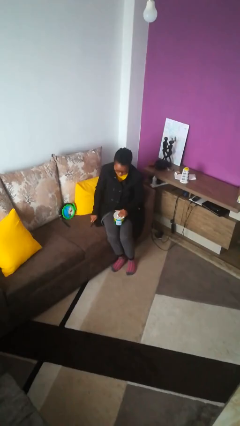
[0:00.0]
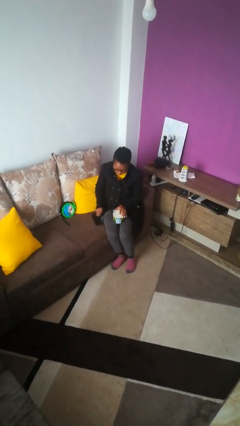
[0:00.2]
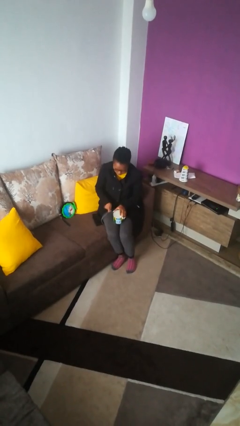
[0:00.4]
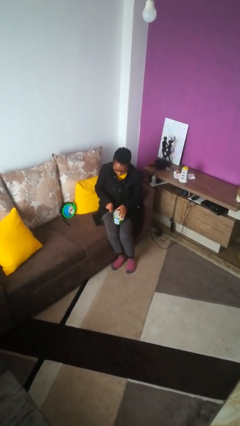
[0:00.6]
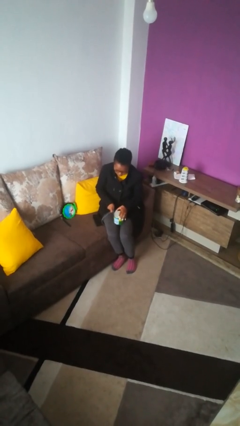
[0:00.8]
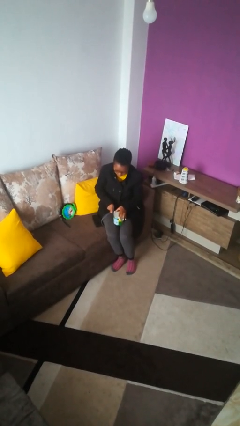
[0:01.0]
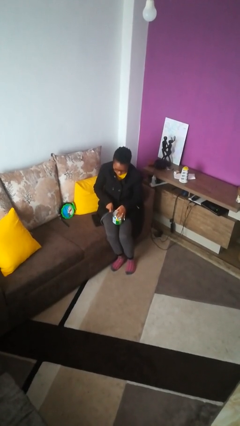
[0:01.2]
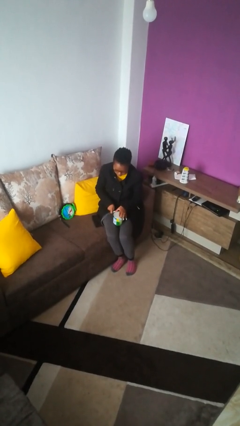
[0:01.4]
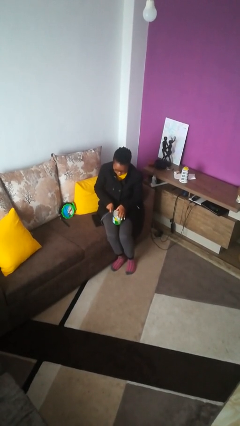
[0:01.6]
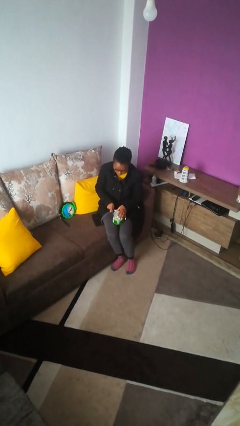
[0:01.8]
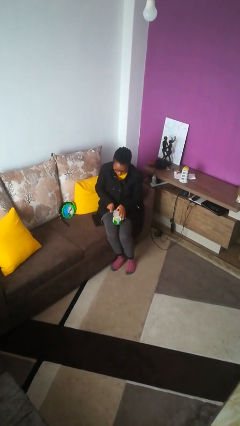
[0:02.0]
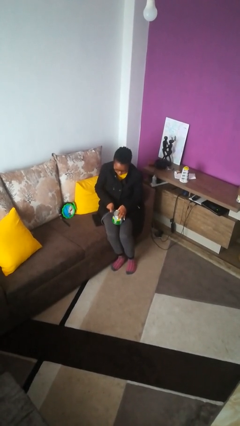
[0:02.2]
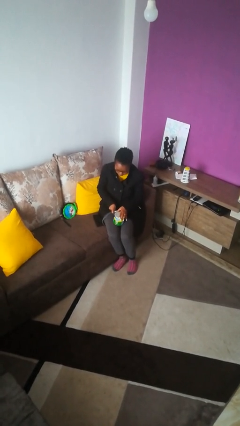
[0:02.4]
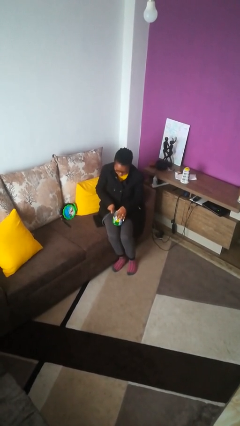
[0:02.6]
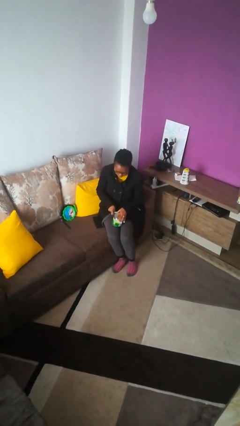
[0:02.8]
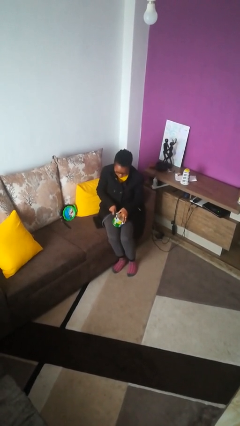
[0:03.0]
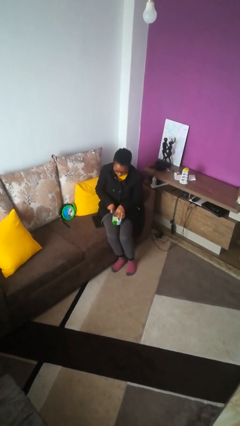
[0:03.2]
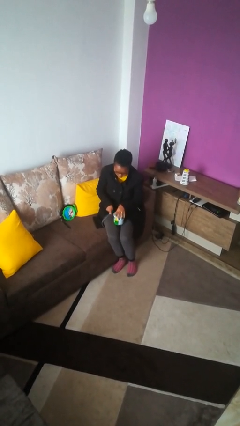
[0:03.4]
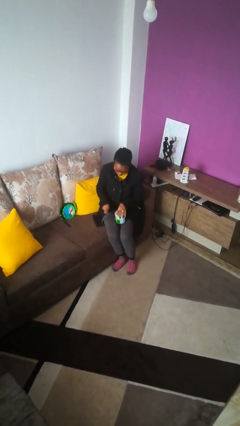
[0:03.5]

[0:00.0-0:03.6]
person opens can with can opener

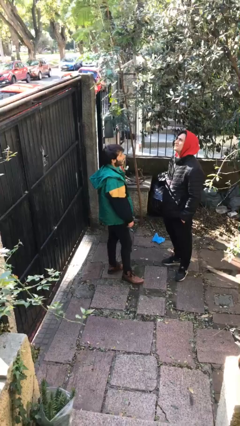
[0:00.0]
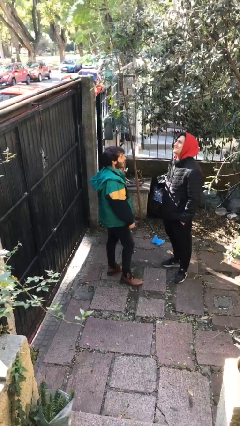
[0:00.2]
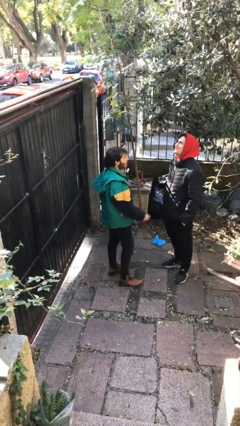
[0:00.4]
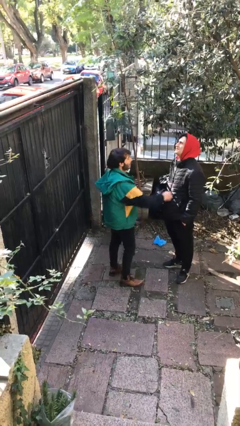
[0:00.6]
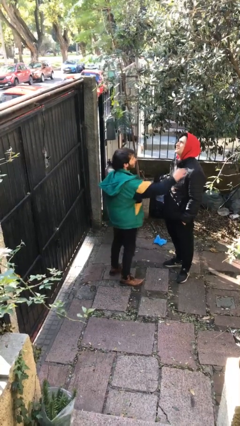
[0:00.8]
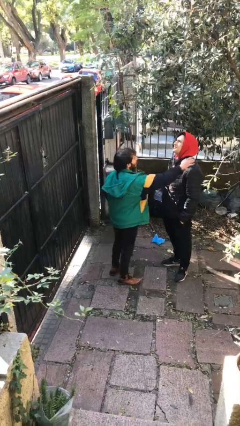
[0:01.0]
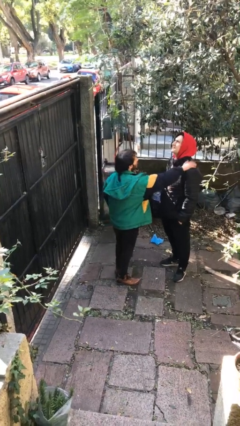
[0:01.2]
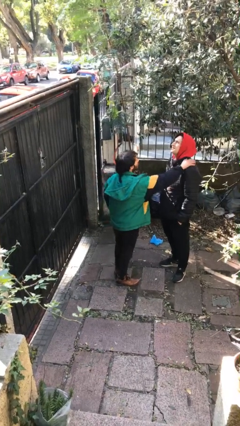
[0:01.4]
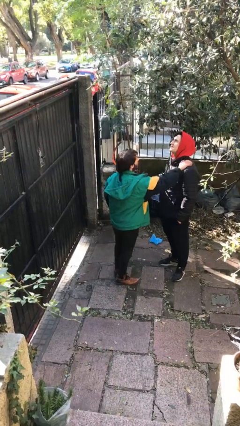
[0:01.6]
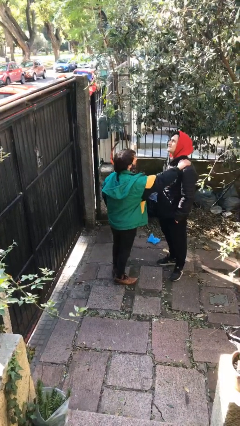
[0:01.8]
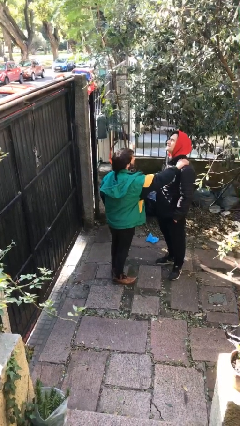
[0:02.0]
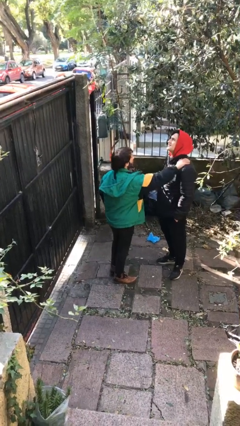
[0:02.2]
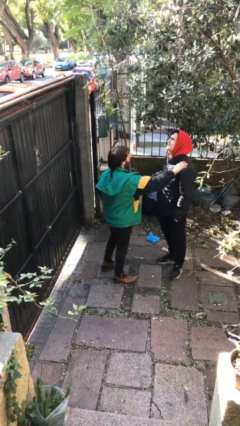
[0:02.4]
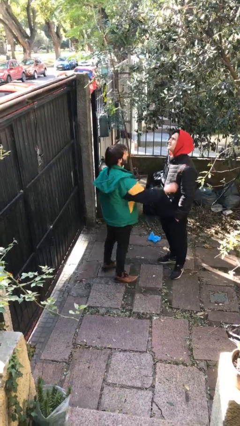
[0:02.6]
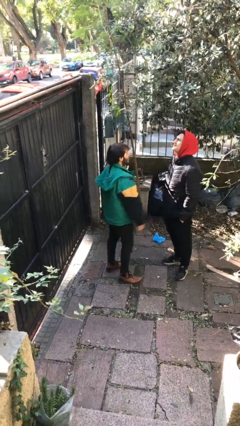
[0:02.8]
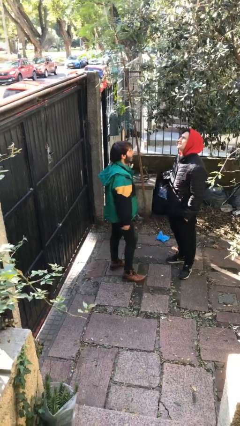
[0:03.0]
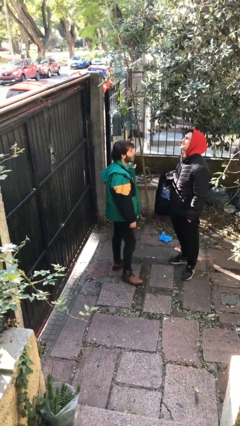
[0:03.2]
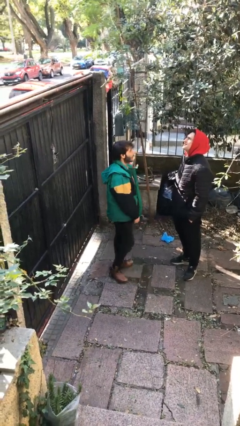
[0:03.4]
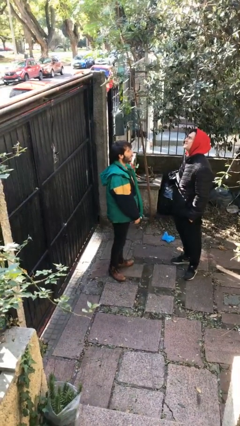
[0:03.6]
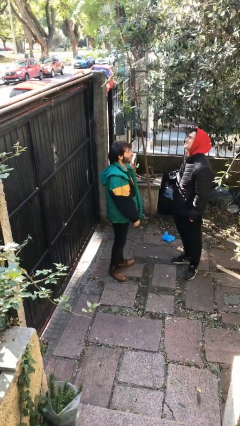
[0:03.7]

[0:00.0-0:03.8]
person pounds shoulders of person

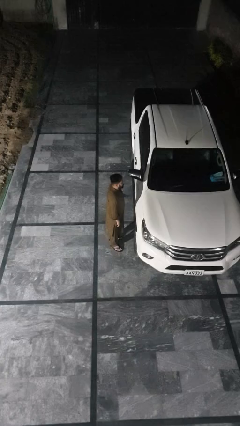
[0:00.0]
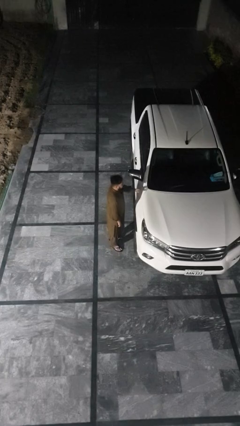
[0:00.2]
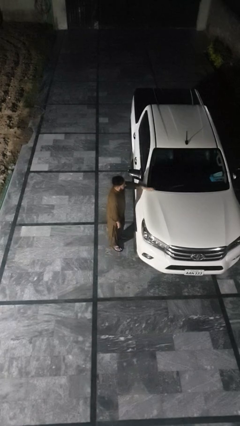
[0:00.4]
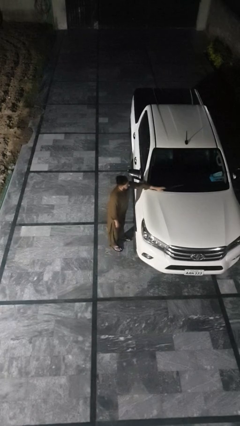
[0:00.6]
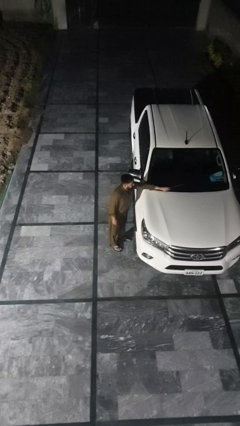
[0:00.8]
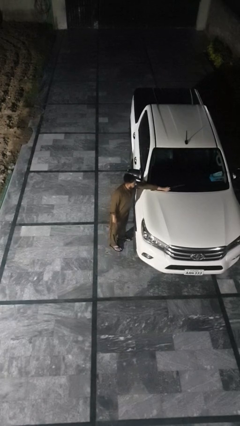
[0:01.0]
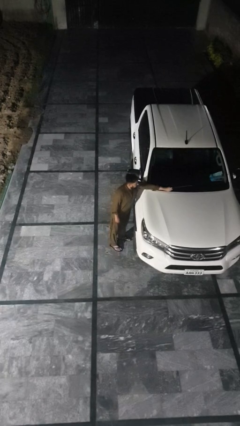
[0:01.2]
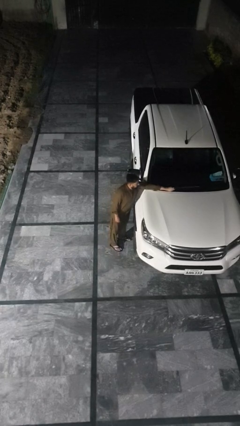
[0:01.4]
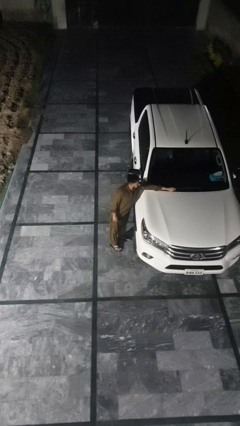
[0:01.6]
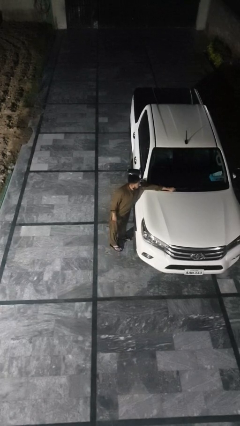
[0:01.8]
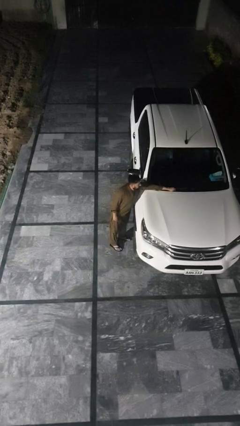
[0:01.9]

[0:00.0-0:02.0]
person flips down car wipers

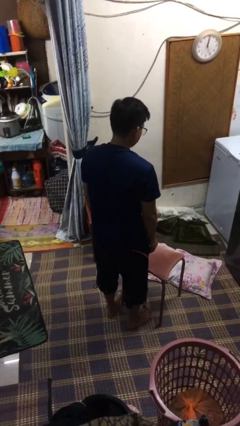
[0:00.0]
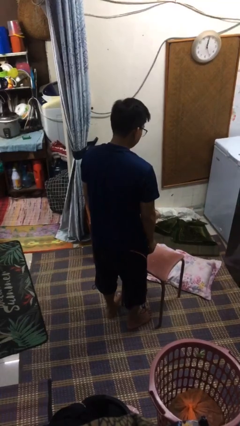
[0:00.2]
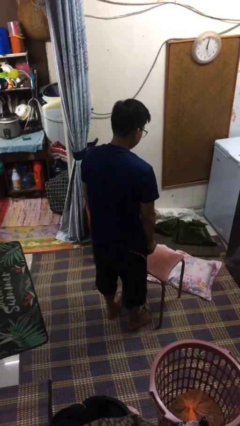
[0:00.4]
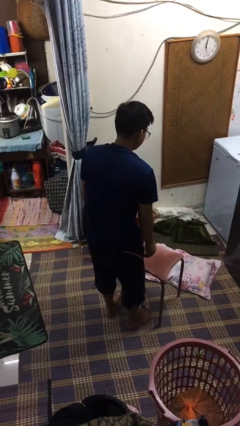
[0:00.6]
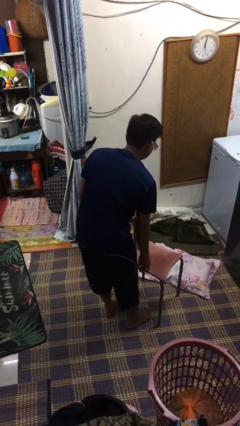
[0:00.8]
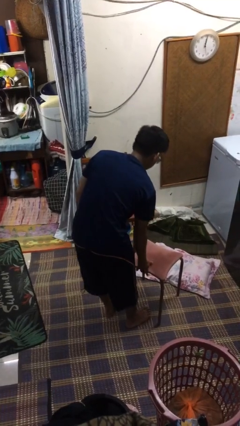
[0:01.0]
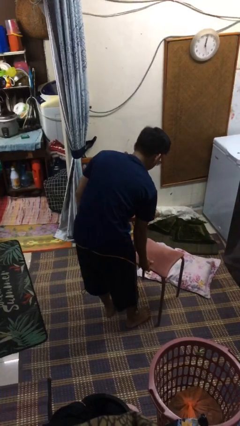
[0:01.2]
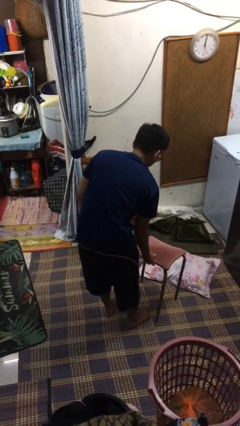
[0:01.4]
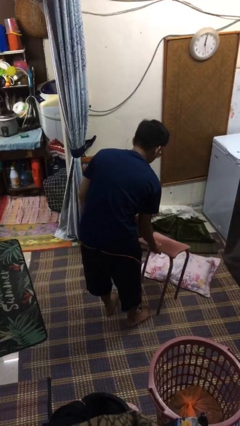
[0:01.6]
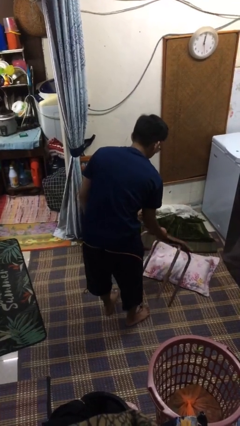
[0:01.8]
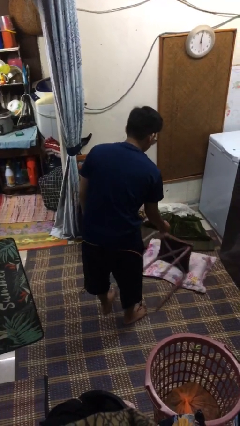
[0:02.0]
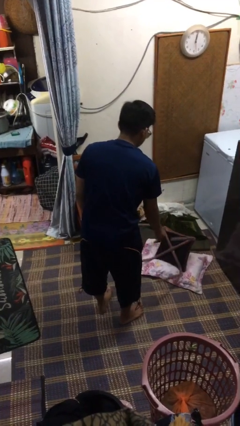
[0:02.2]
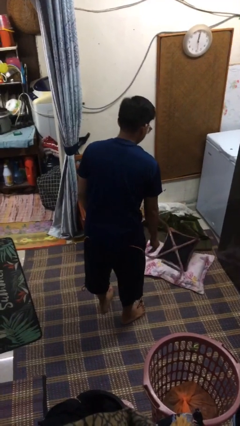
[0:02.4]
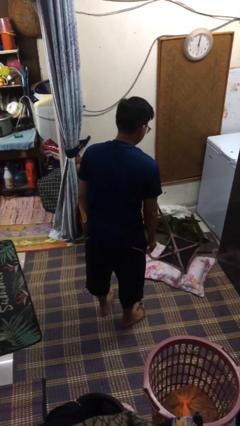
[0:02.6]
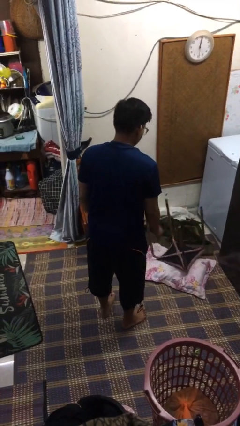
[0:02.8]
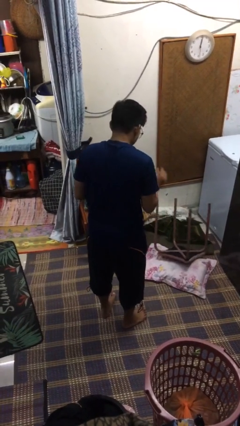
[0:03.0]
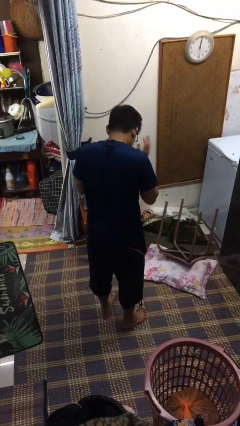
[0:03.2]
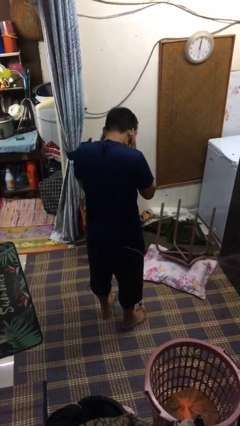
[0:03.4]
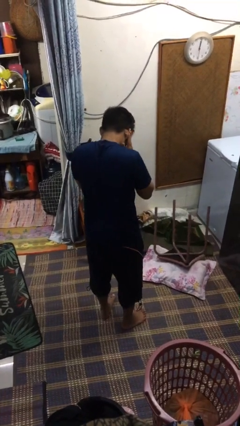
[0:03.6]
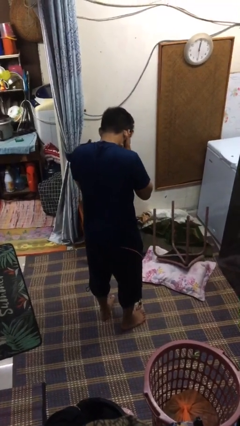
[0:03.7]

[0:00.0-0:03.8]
person knocks over furniture

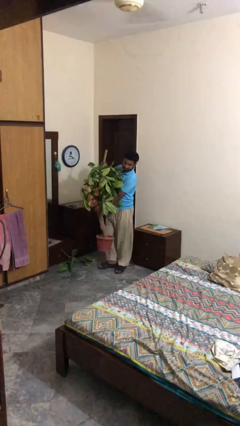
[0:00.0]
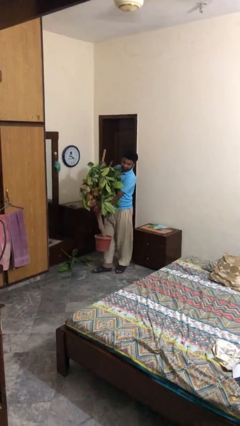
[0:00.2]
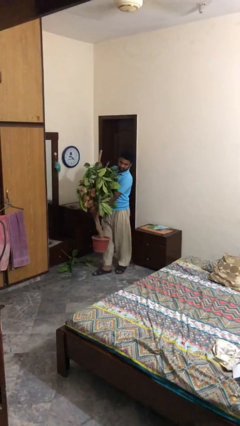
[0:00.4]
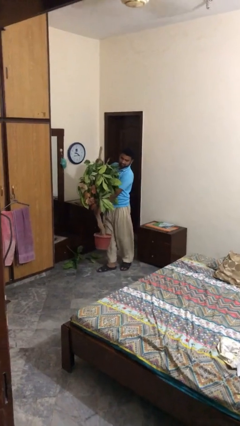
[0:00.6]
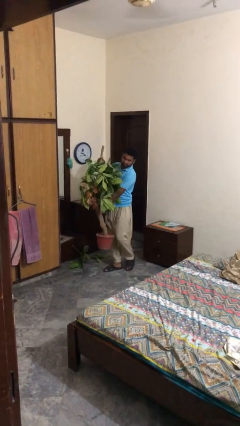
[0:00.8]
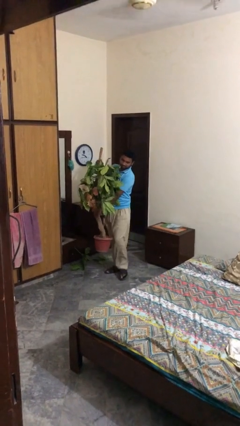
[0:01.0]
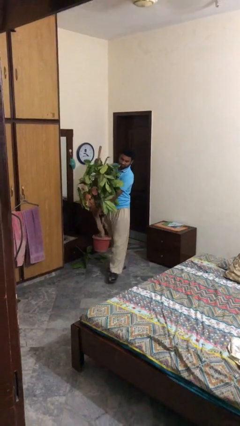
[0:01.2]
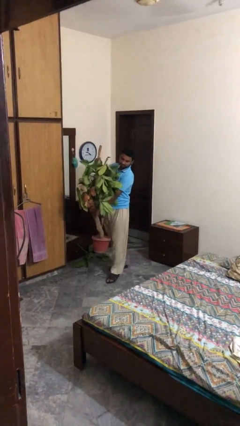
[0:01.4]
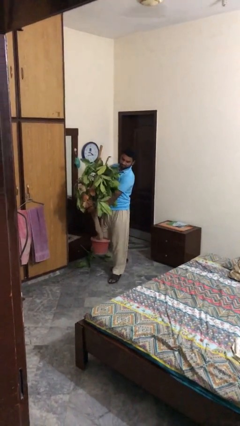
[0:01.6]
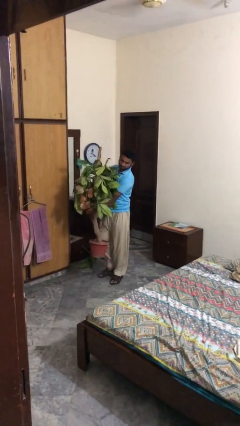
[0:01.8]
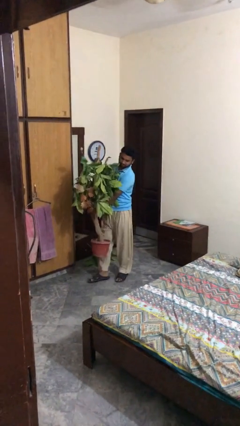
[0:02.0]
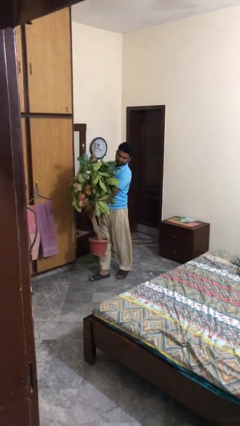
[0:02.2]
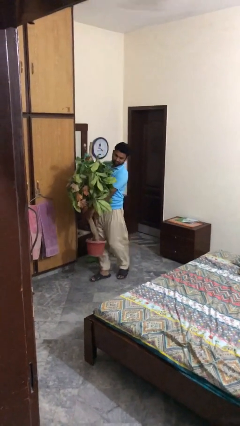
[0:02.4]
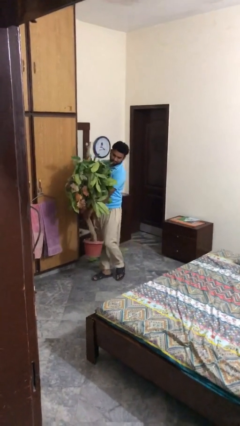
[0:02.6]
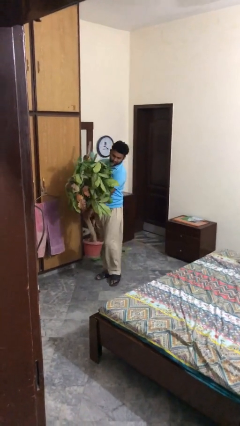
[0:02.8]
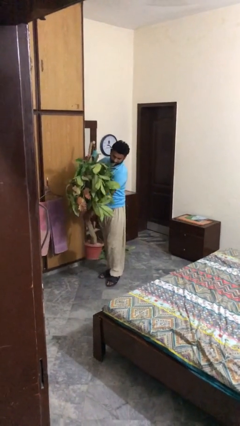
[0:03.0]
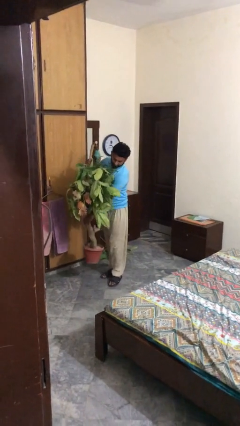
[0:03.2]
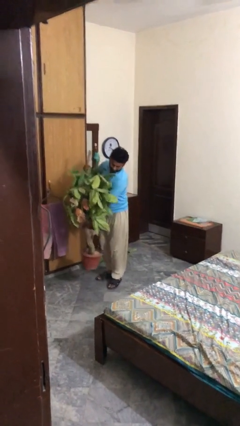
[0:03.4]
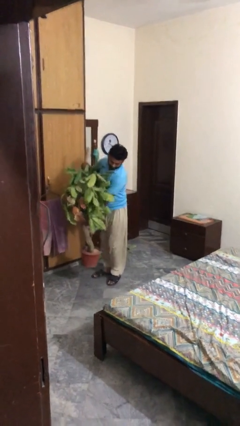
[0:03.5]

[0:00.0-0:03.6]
person carries heavy object

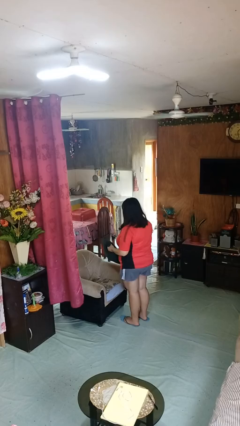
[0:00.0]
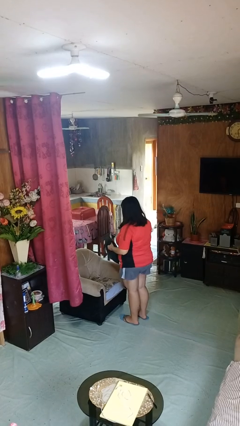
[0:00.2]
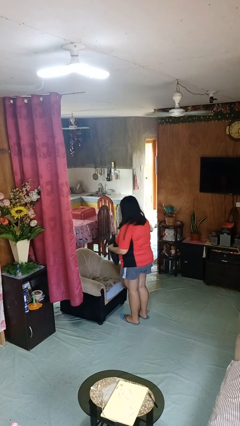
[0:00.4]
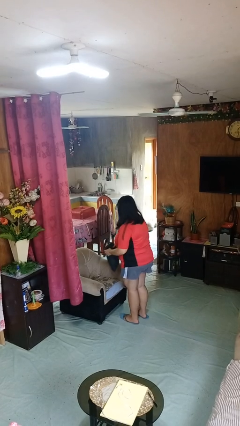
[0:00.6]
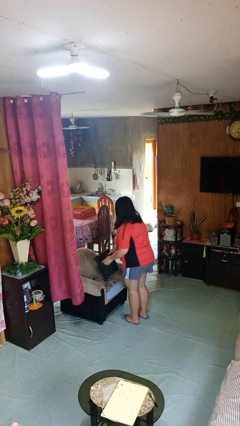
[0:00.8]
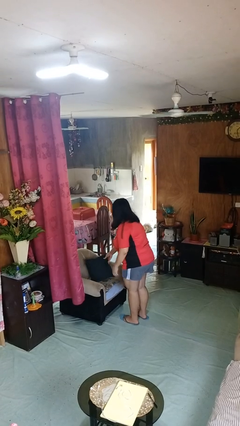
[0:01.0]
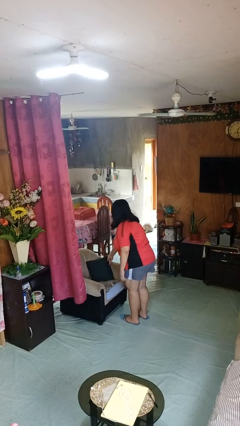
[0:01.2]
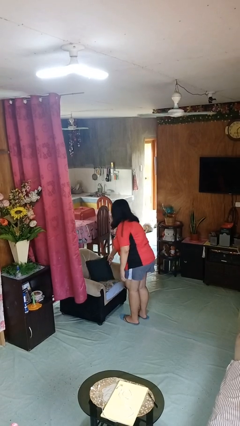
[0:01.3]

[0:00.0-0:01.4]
person puts down object on couch
